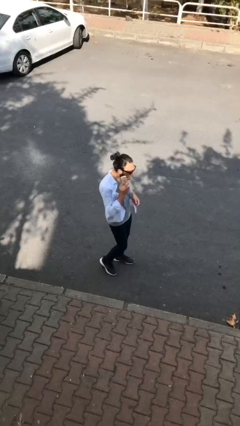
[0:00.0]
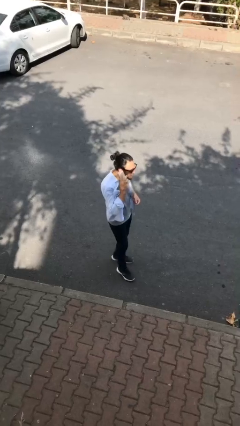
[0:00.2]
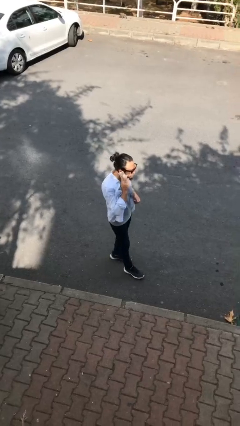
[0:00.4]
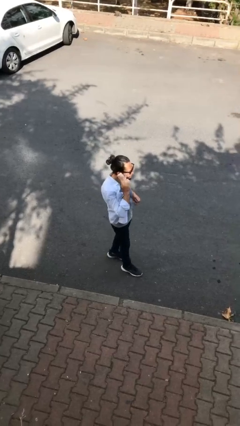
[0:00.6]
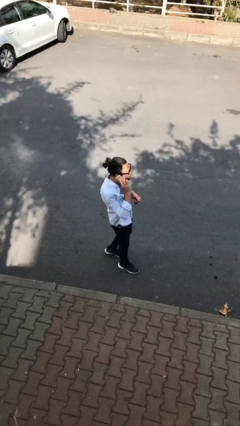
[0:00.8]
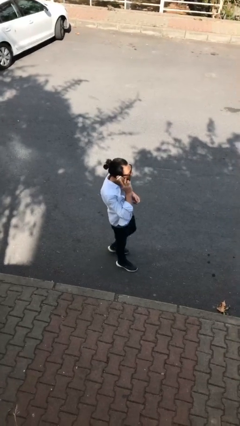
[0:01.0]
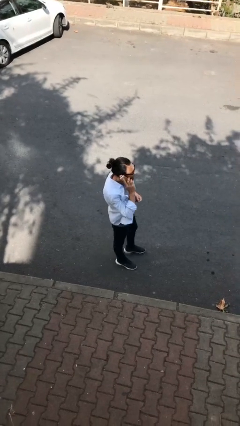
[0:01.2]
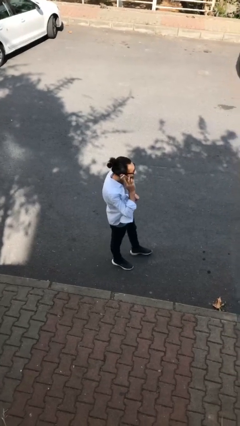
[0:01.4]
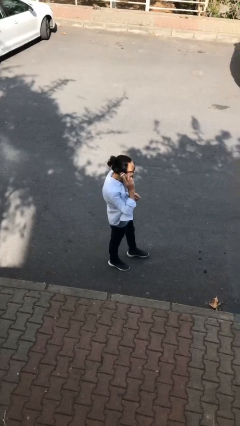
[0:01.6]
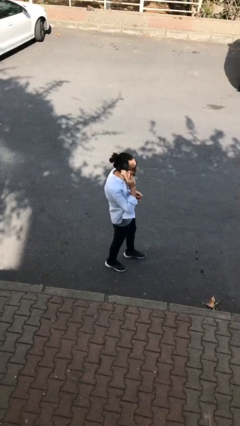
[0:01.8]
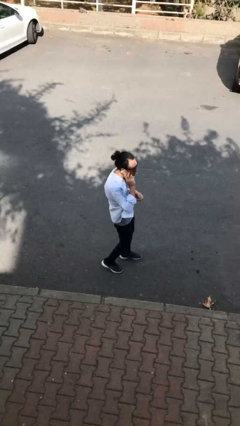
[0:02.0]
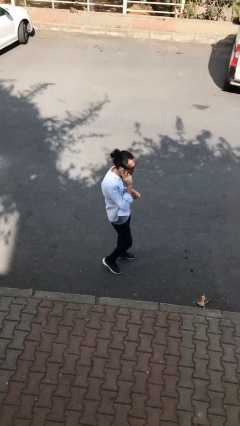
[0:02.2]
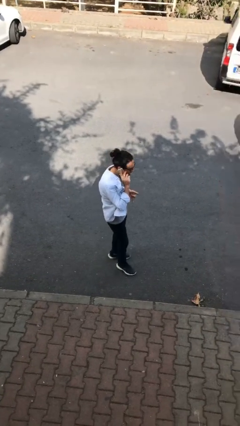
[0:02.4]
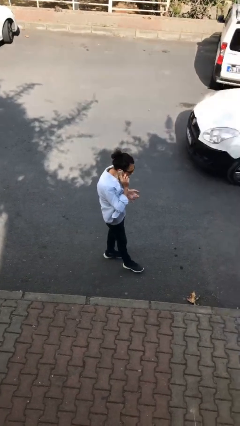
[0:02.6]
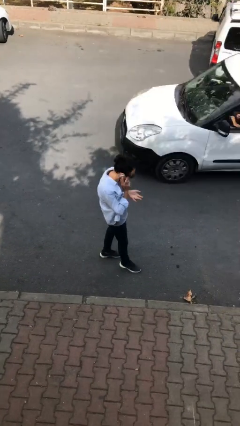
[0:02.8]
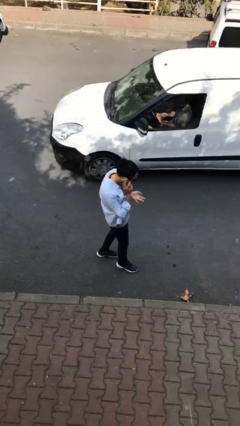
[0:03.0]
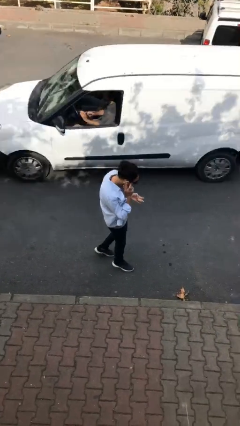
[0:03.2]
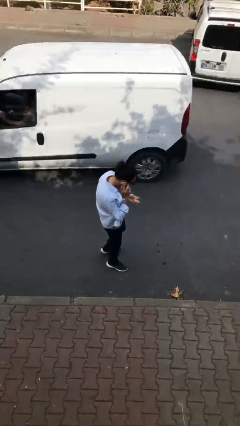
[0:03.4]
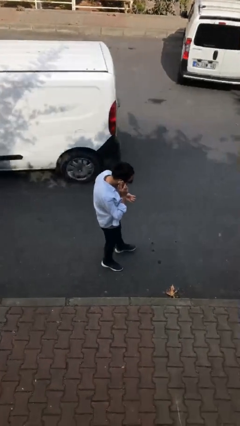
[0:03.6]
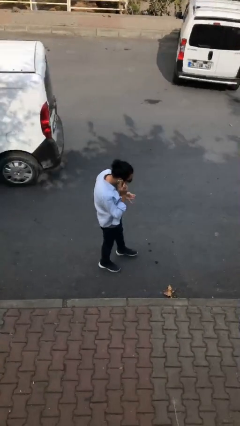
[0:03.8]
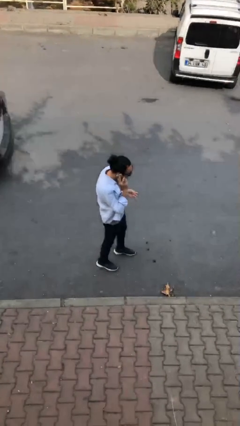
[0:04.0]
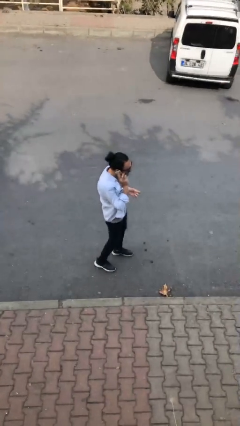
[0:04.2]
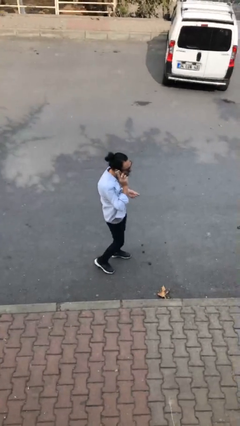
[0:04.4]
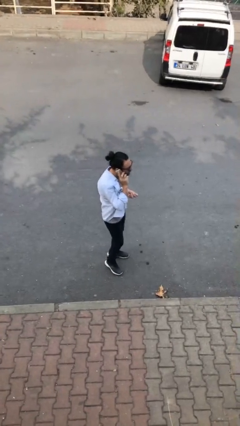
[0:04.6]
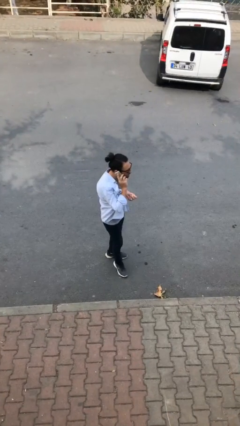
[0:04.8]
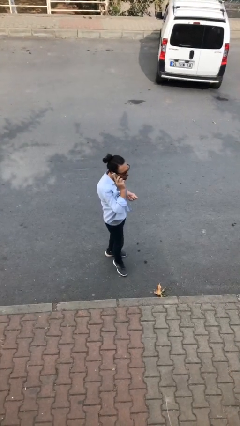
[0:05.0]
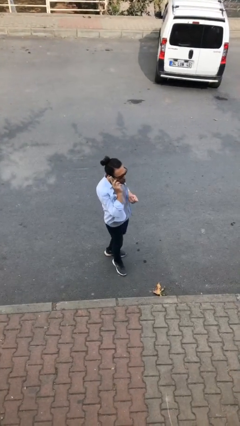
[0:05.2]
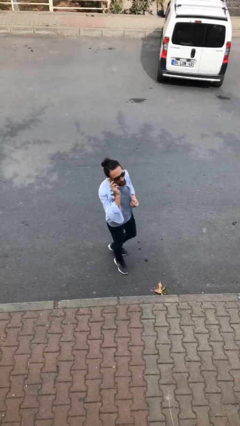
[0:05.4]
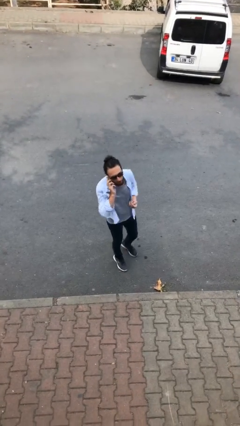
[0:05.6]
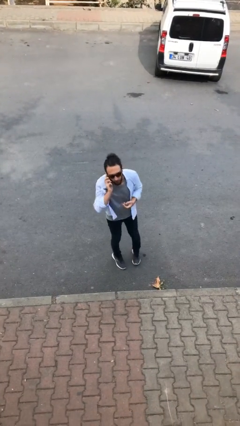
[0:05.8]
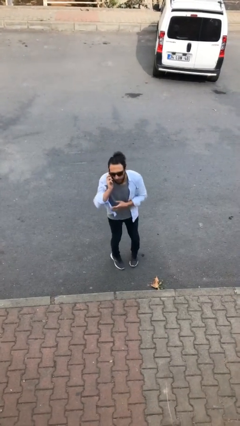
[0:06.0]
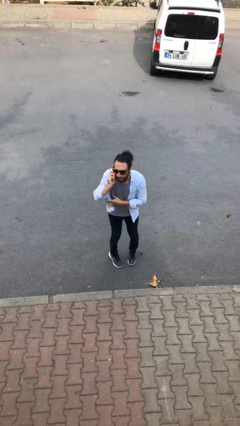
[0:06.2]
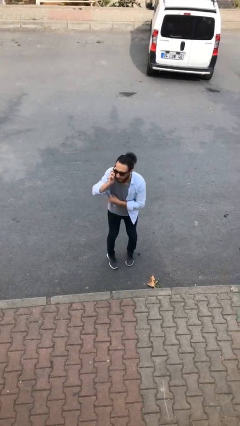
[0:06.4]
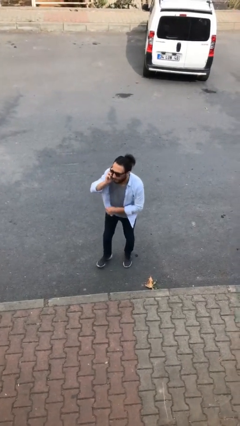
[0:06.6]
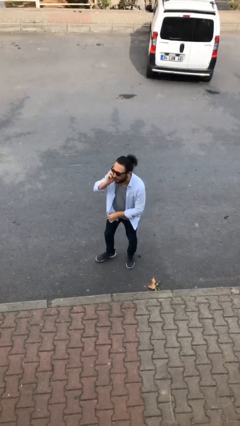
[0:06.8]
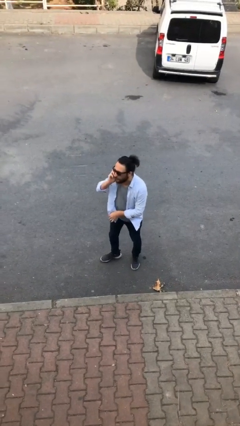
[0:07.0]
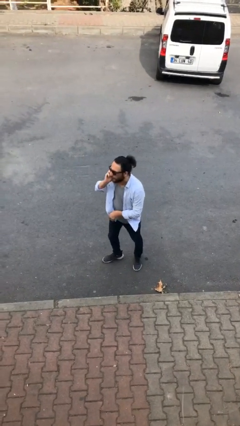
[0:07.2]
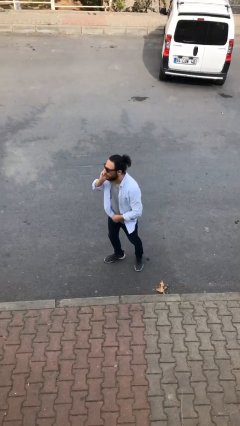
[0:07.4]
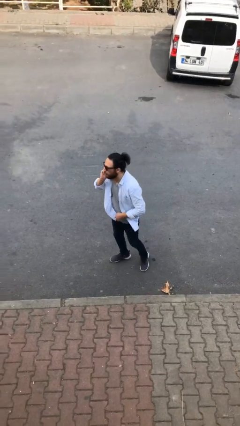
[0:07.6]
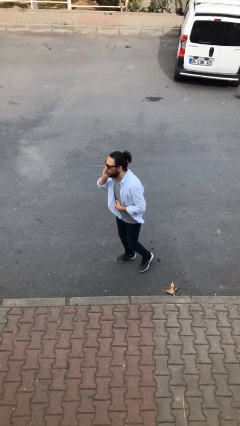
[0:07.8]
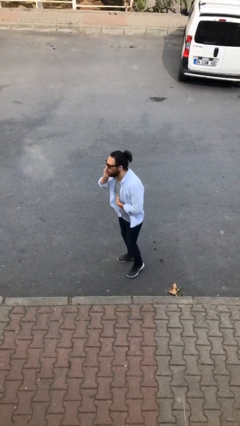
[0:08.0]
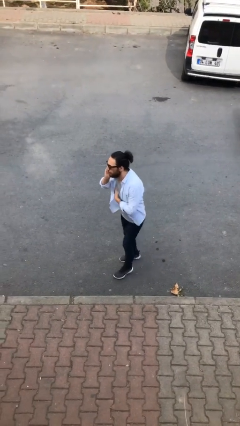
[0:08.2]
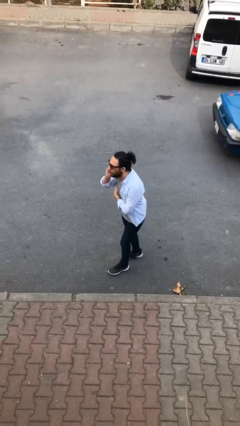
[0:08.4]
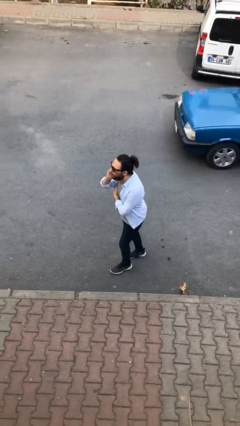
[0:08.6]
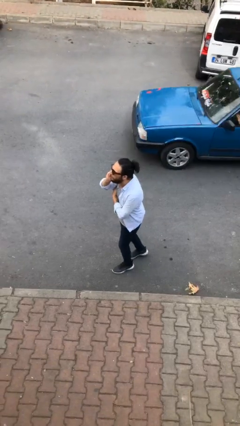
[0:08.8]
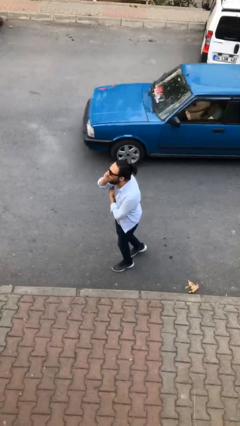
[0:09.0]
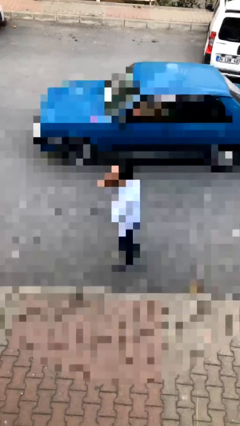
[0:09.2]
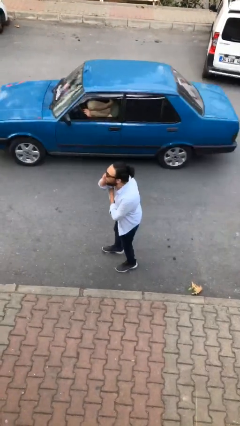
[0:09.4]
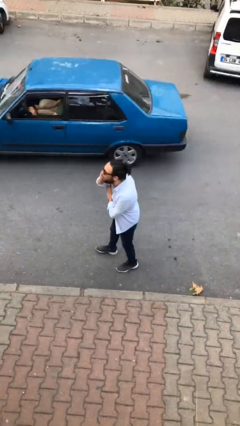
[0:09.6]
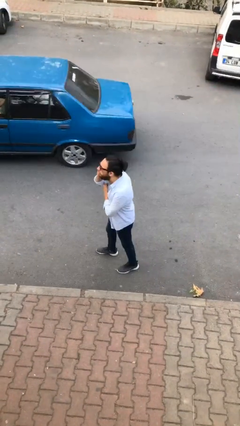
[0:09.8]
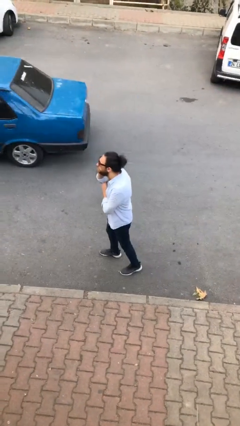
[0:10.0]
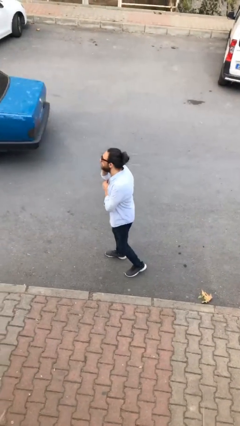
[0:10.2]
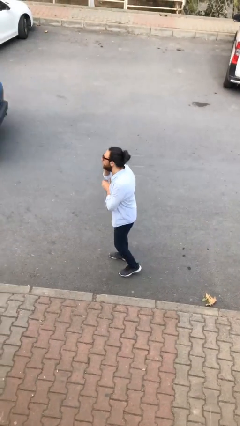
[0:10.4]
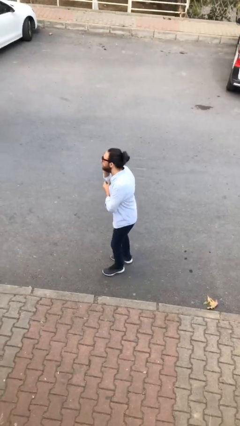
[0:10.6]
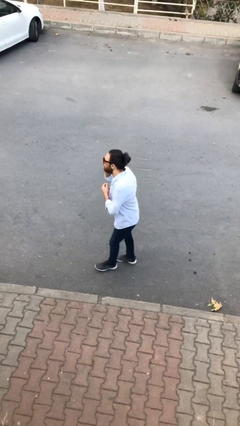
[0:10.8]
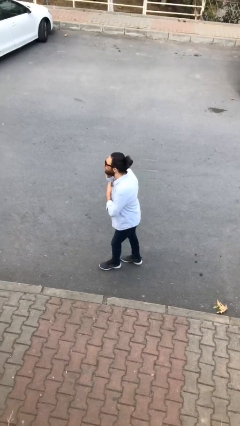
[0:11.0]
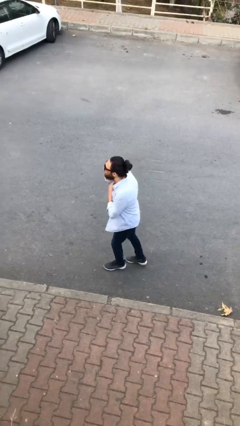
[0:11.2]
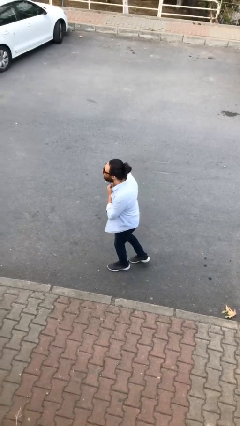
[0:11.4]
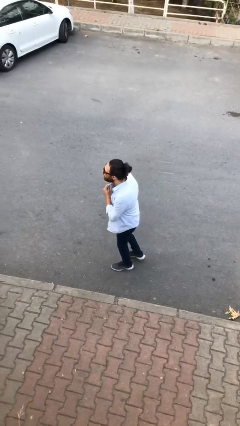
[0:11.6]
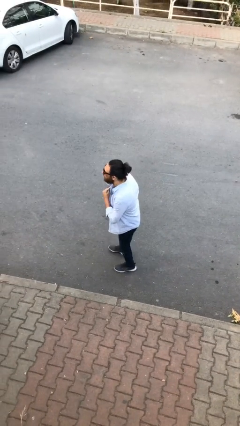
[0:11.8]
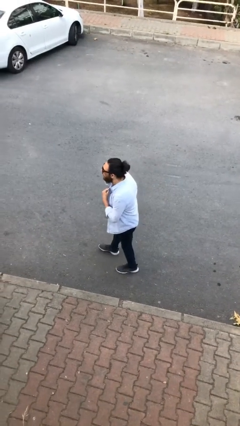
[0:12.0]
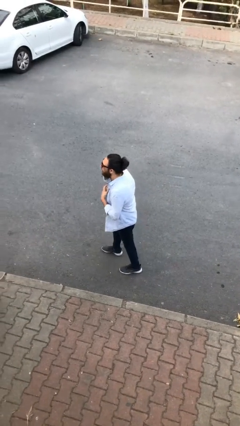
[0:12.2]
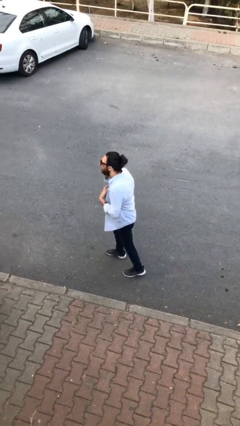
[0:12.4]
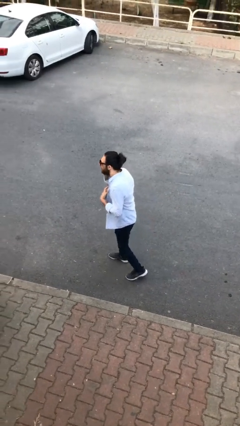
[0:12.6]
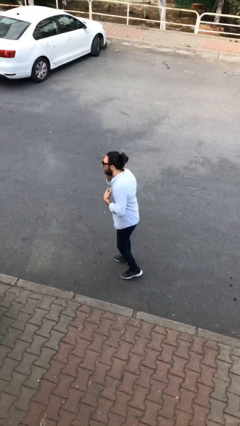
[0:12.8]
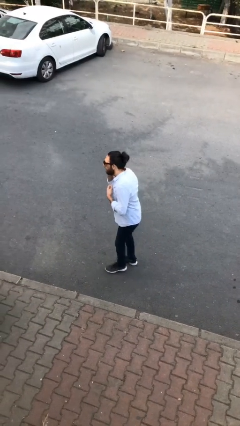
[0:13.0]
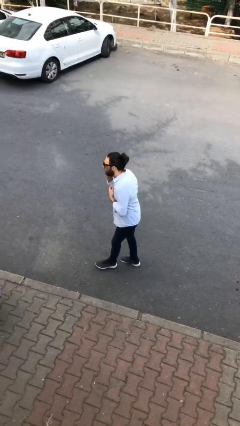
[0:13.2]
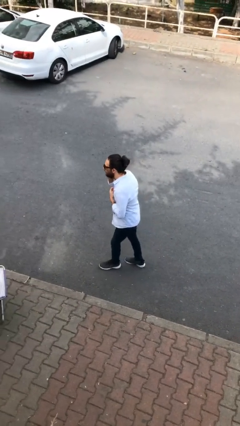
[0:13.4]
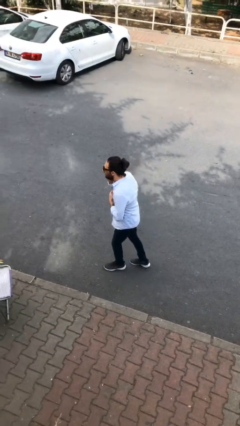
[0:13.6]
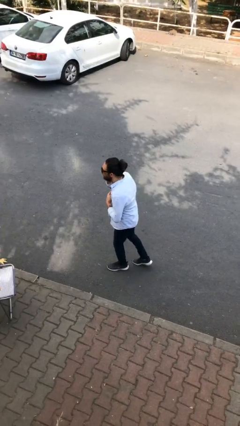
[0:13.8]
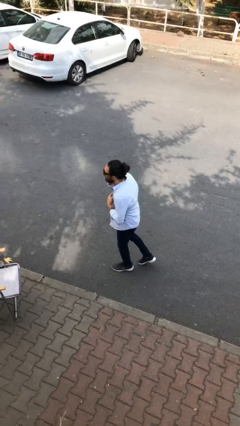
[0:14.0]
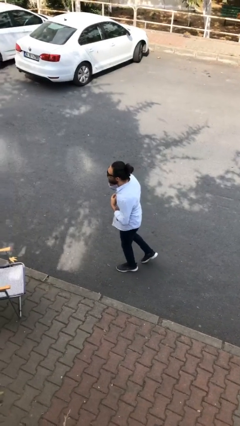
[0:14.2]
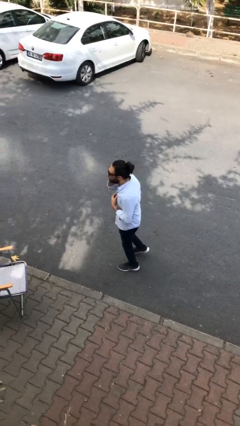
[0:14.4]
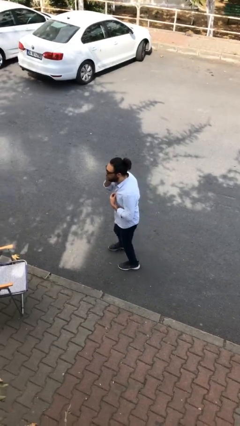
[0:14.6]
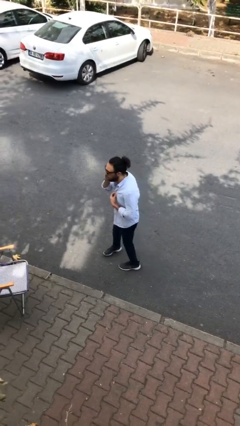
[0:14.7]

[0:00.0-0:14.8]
person talks on phone

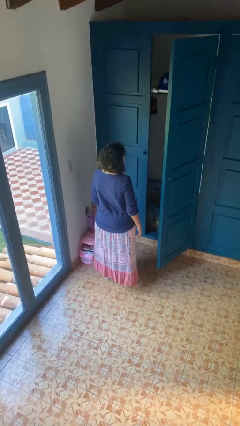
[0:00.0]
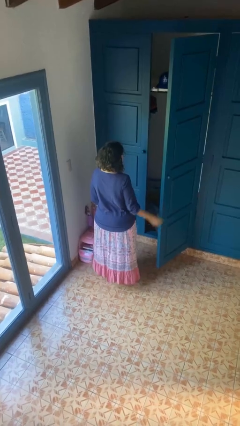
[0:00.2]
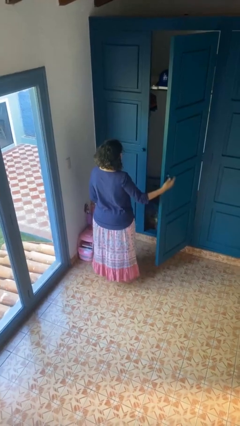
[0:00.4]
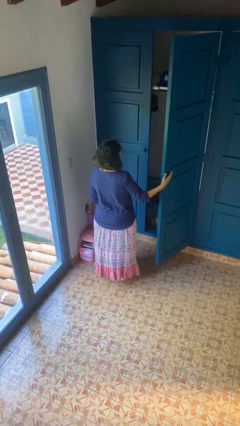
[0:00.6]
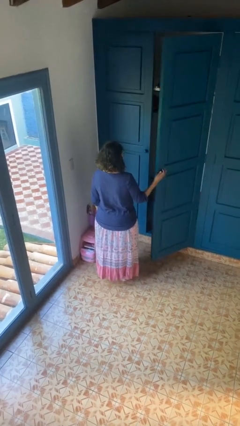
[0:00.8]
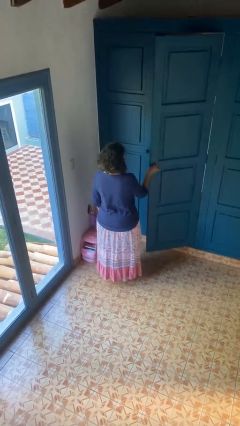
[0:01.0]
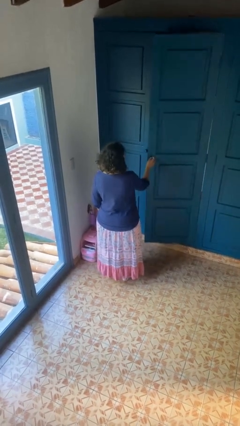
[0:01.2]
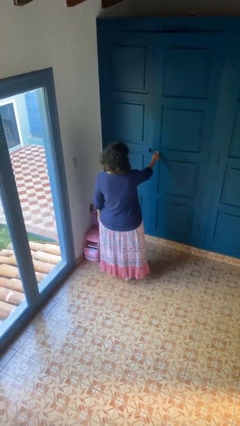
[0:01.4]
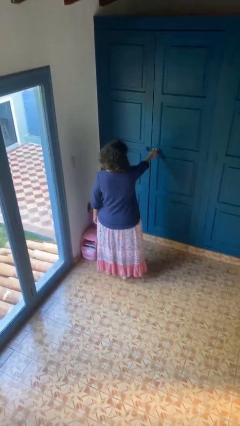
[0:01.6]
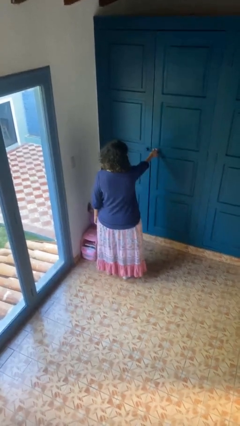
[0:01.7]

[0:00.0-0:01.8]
person closes closet door

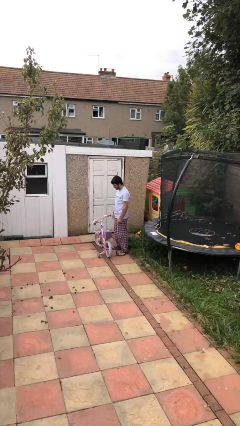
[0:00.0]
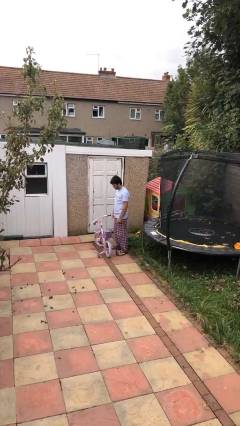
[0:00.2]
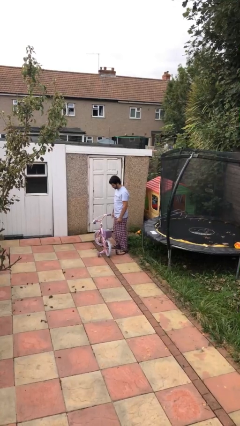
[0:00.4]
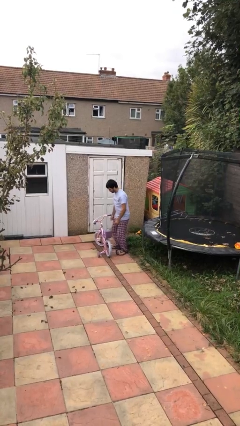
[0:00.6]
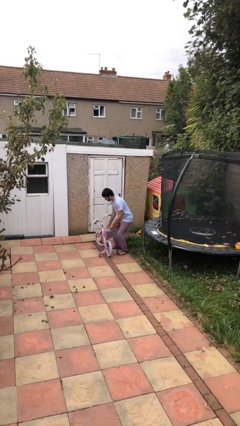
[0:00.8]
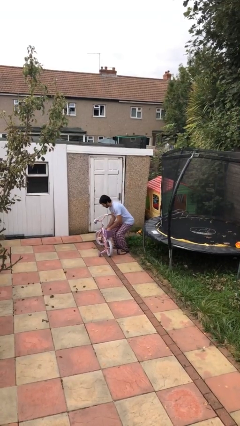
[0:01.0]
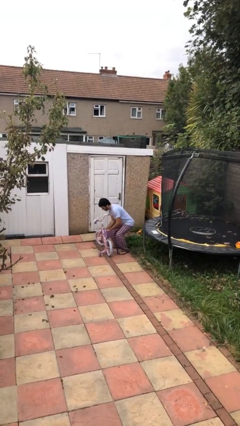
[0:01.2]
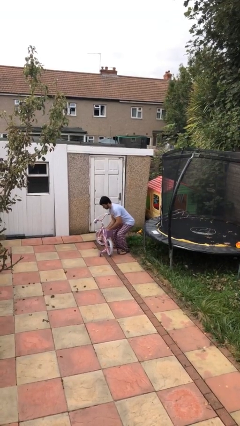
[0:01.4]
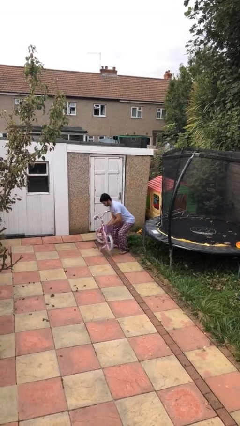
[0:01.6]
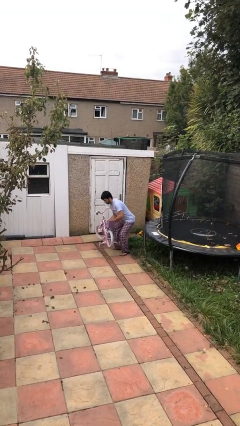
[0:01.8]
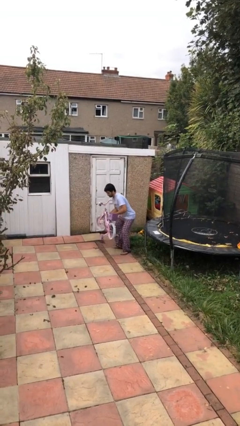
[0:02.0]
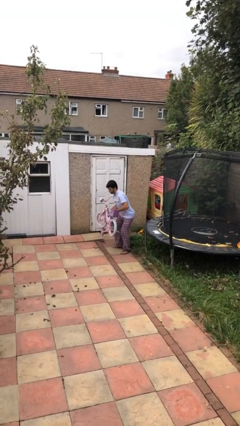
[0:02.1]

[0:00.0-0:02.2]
person picks up object from floor
